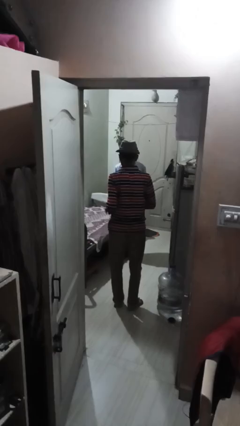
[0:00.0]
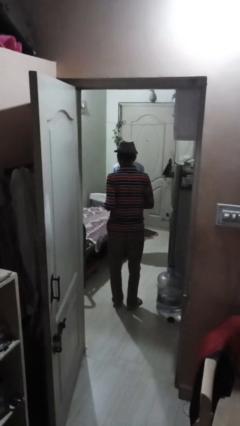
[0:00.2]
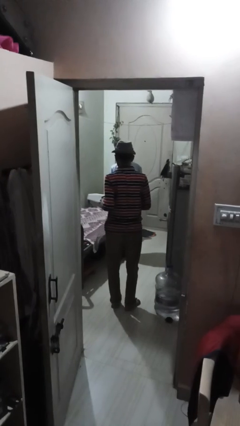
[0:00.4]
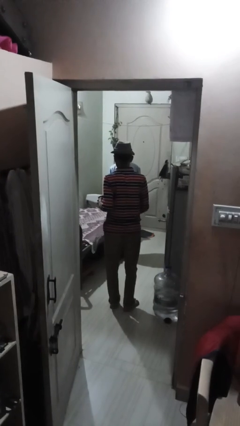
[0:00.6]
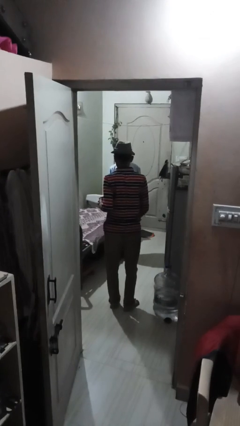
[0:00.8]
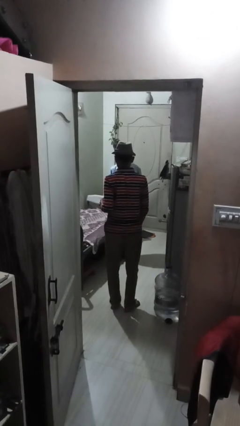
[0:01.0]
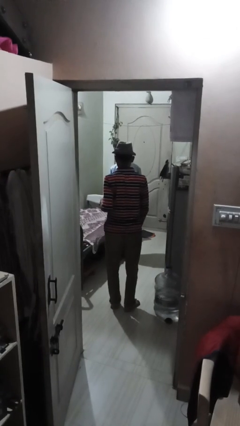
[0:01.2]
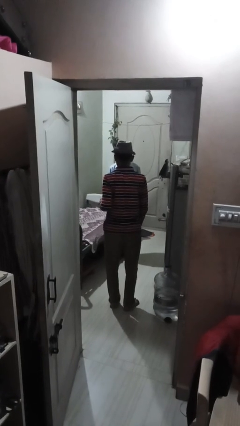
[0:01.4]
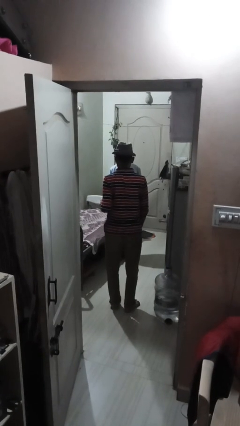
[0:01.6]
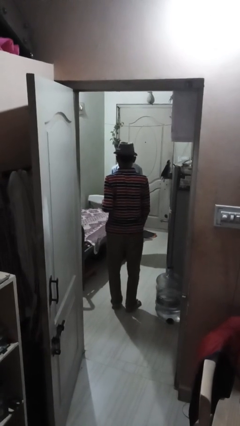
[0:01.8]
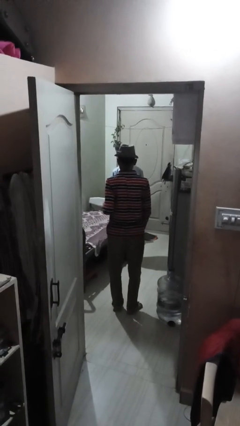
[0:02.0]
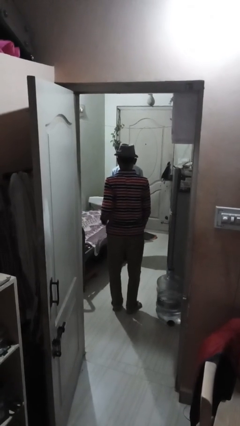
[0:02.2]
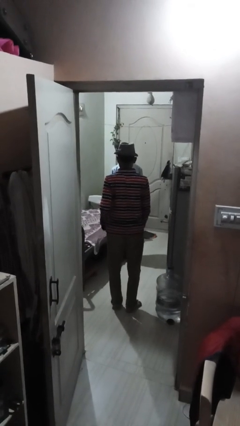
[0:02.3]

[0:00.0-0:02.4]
person throws object to person

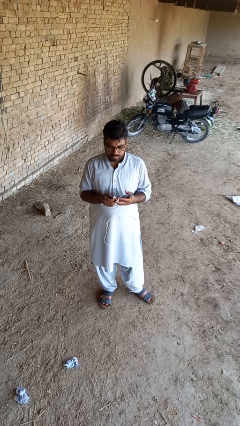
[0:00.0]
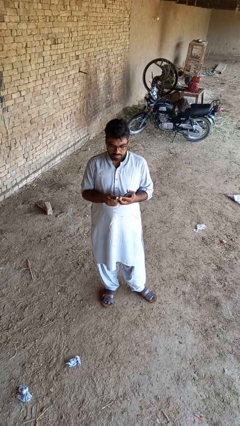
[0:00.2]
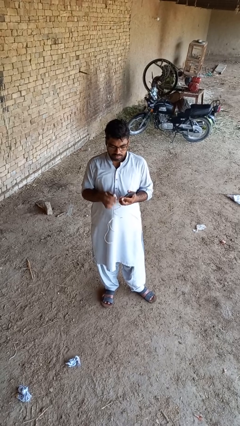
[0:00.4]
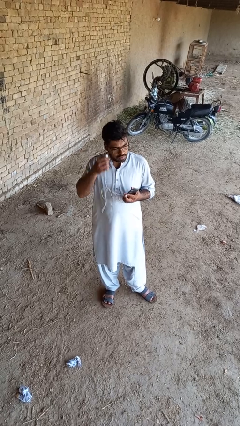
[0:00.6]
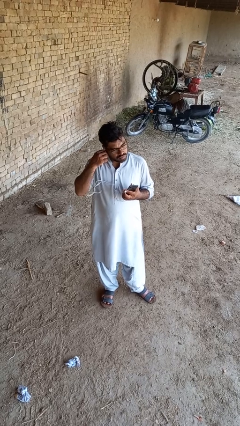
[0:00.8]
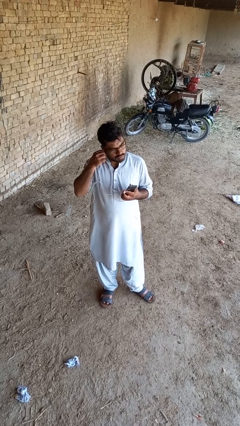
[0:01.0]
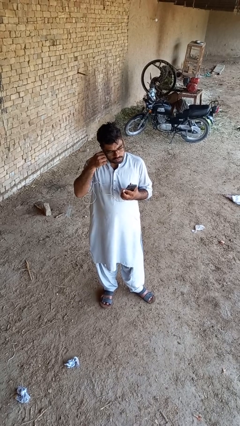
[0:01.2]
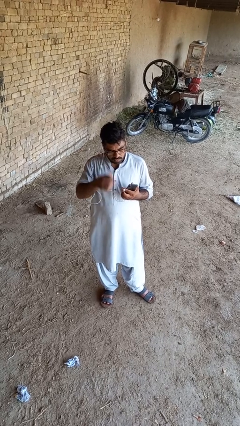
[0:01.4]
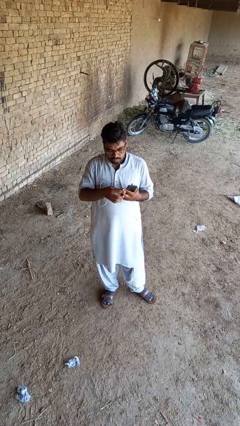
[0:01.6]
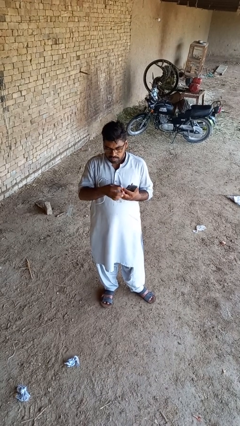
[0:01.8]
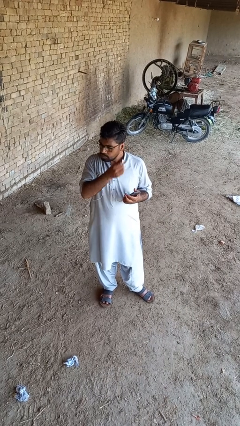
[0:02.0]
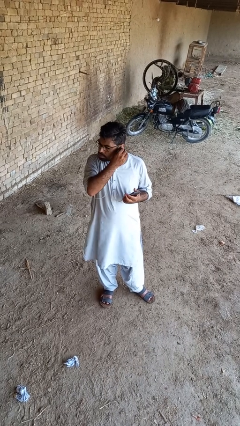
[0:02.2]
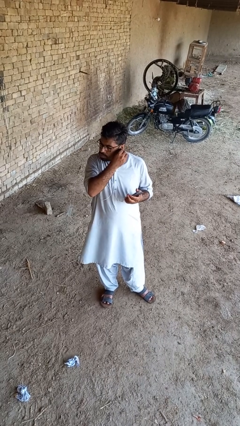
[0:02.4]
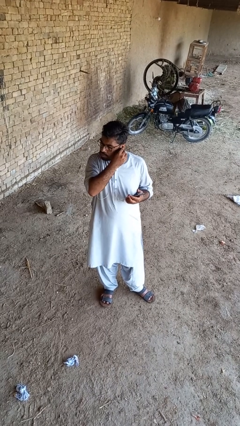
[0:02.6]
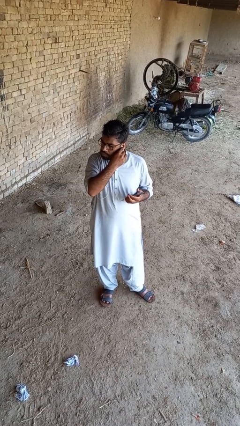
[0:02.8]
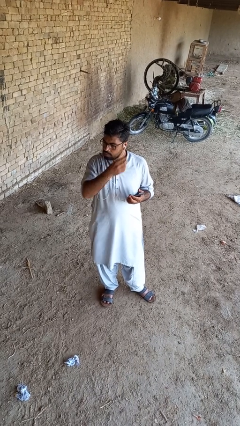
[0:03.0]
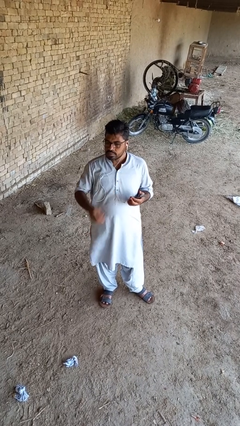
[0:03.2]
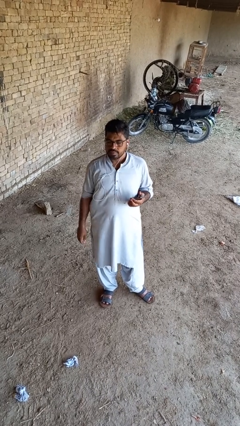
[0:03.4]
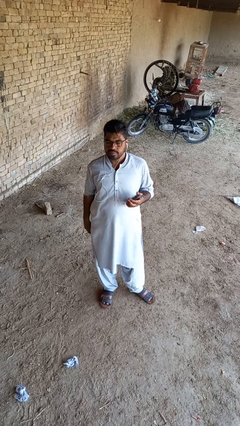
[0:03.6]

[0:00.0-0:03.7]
person puts on headphones

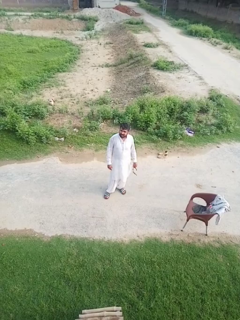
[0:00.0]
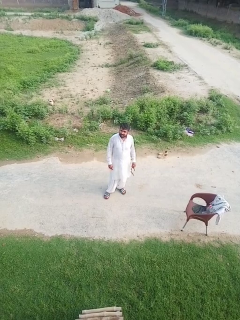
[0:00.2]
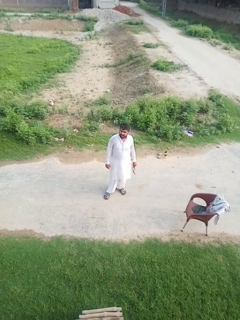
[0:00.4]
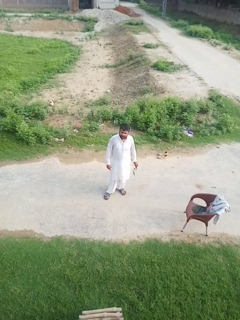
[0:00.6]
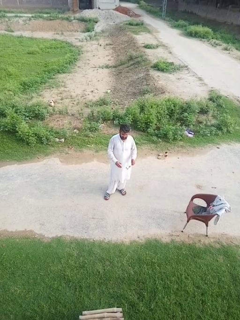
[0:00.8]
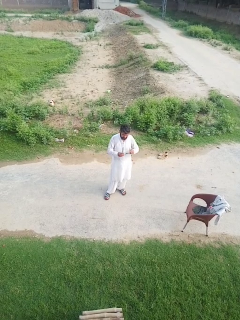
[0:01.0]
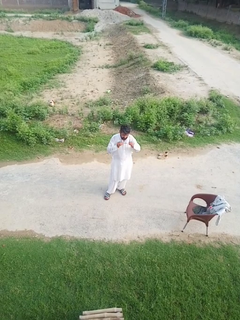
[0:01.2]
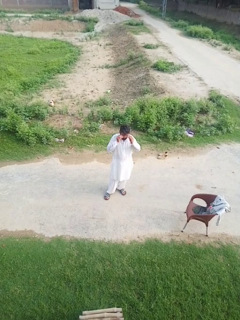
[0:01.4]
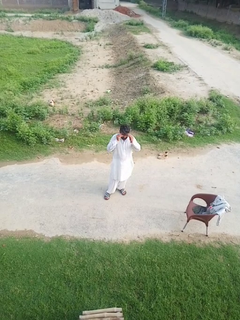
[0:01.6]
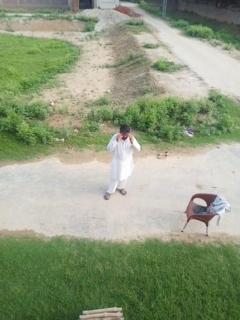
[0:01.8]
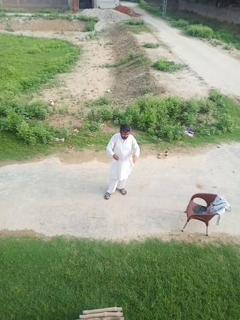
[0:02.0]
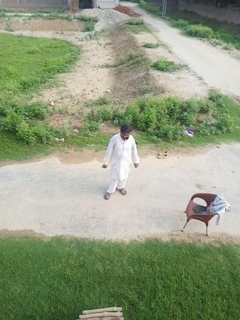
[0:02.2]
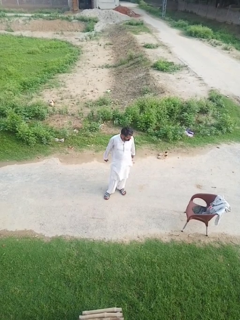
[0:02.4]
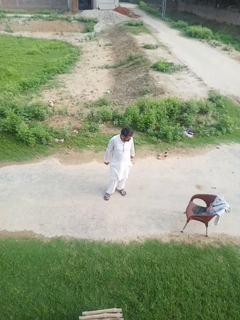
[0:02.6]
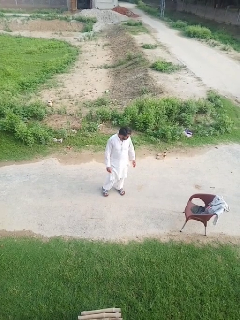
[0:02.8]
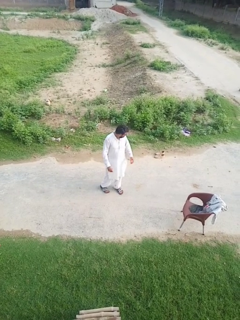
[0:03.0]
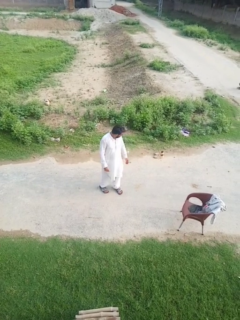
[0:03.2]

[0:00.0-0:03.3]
person puts on glasses

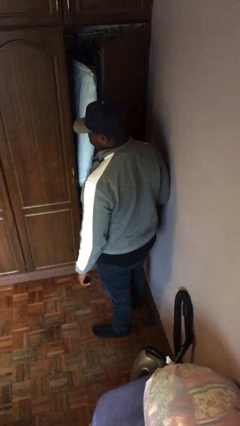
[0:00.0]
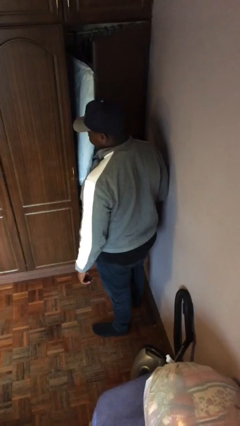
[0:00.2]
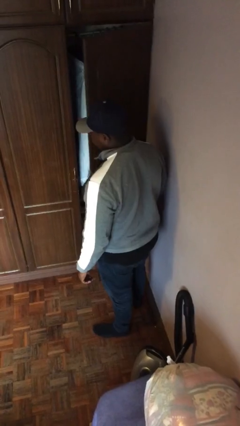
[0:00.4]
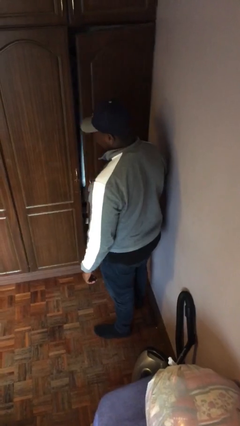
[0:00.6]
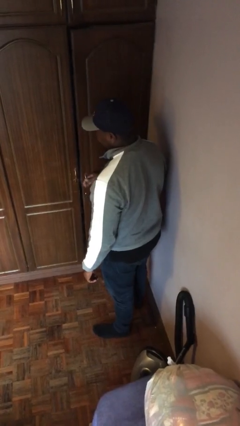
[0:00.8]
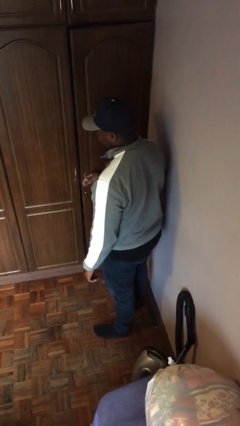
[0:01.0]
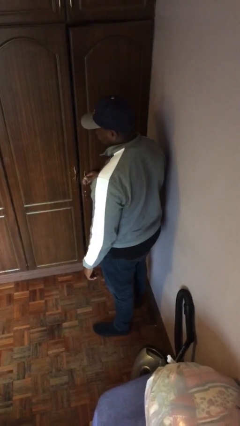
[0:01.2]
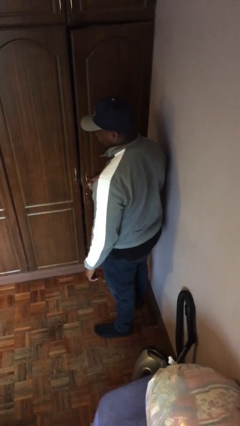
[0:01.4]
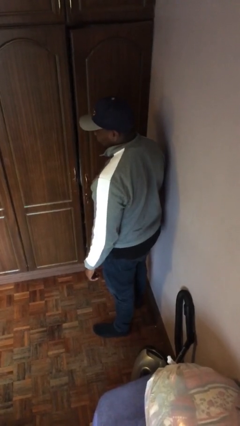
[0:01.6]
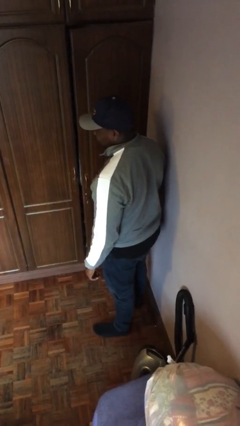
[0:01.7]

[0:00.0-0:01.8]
person closes closet door

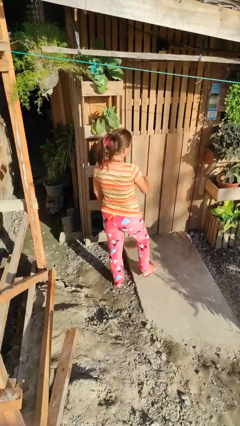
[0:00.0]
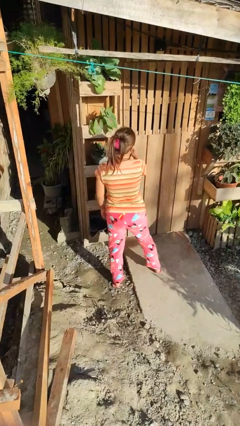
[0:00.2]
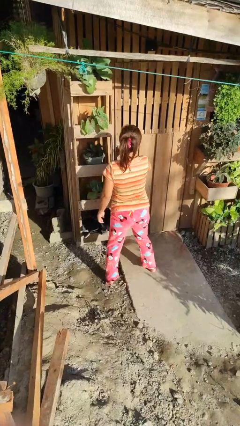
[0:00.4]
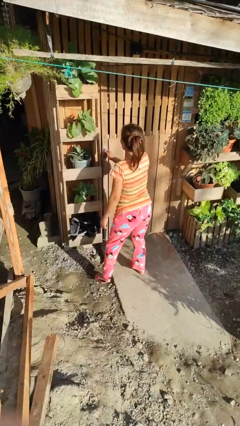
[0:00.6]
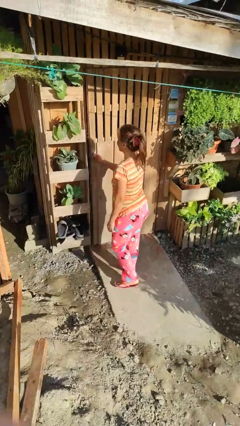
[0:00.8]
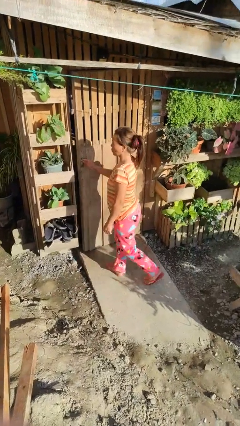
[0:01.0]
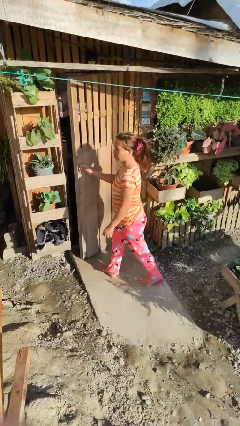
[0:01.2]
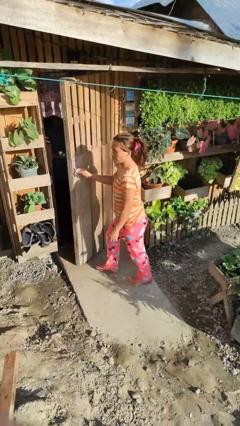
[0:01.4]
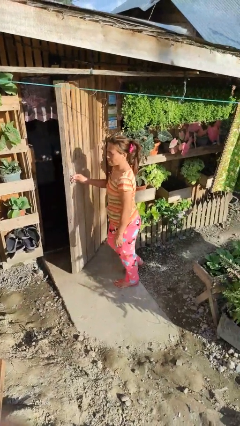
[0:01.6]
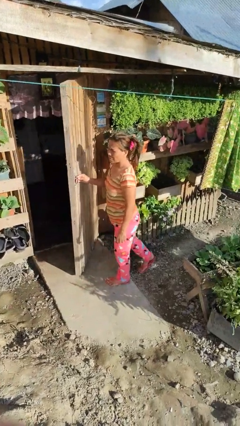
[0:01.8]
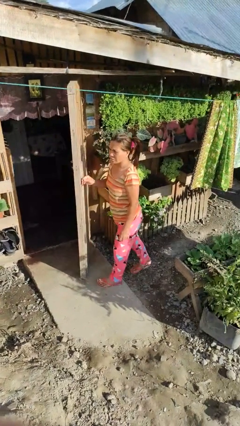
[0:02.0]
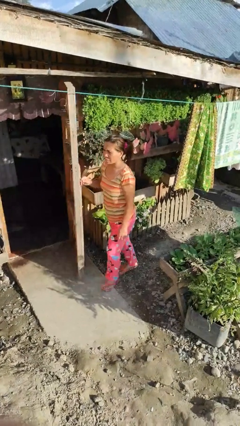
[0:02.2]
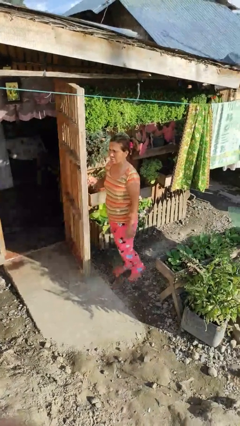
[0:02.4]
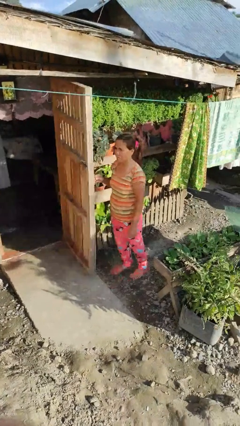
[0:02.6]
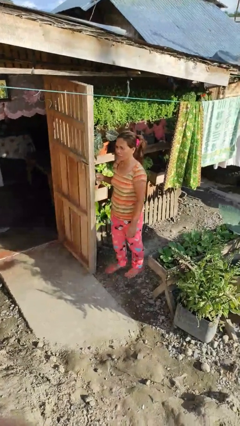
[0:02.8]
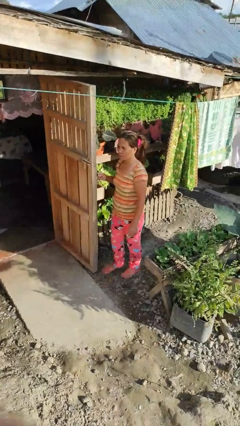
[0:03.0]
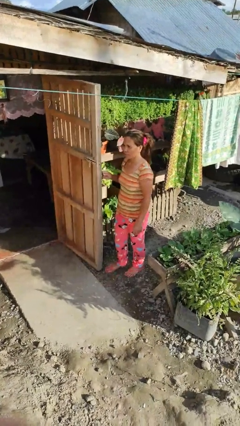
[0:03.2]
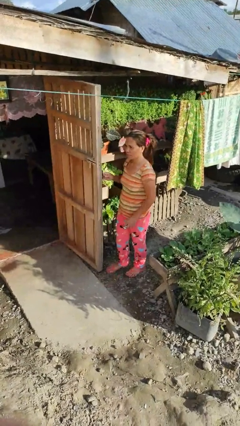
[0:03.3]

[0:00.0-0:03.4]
person opens facility door

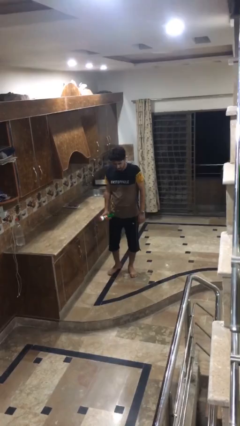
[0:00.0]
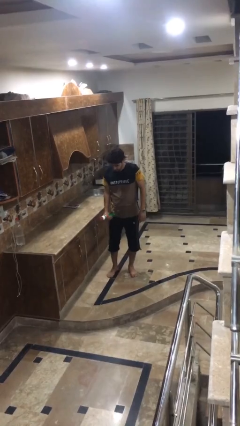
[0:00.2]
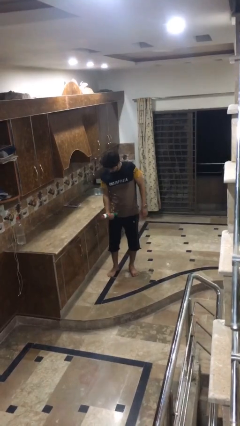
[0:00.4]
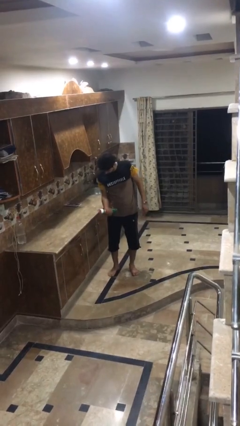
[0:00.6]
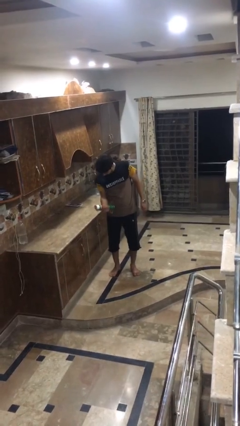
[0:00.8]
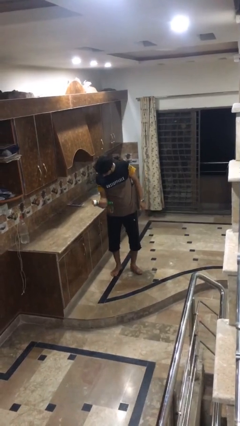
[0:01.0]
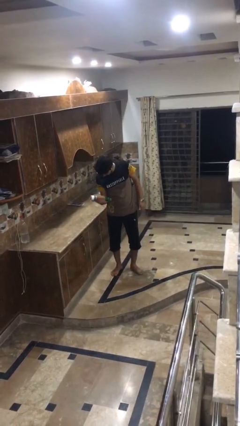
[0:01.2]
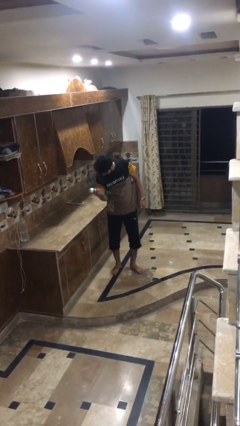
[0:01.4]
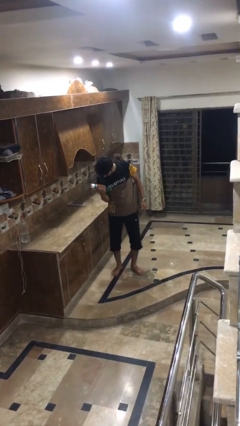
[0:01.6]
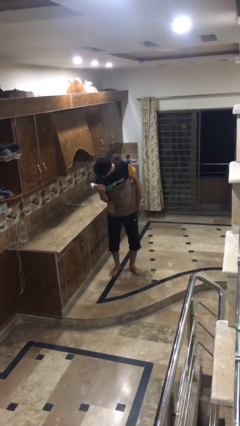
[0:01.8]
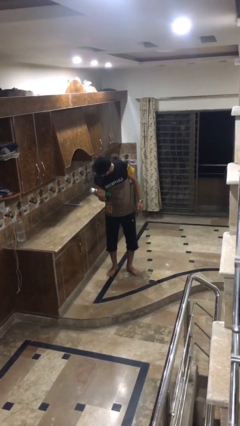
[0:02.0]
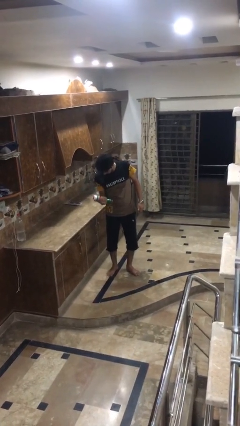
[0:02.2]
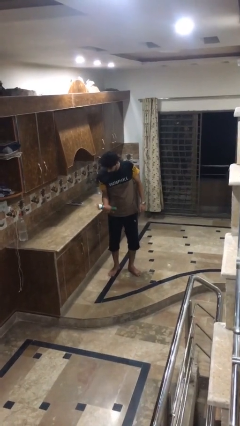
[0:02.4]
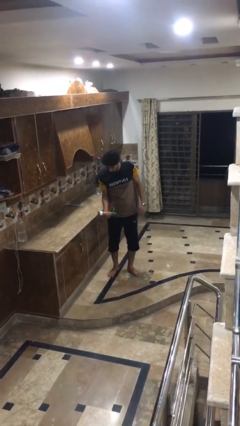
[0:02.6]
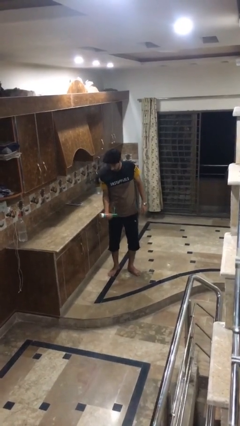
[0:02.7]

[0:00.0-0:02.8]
person lifts dumbbells

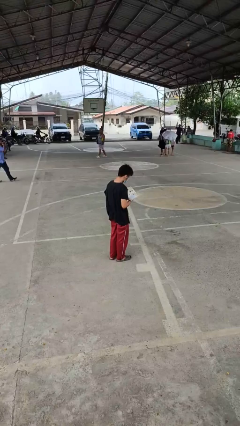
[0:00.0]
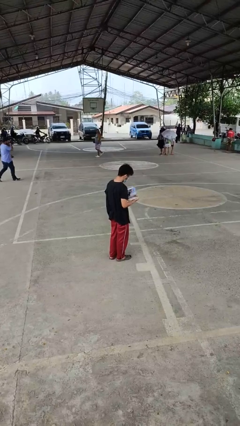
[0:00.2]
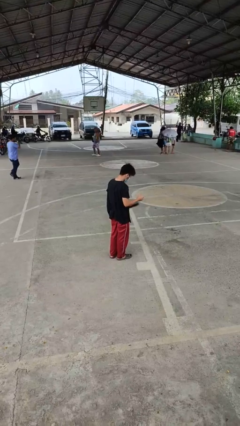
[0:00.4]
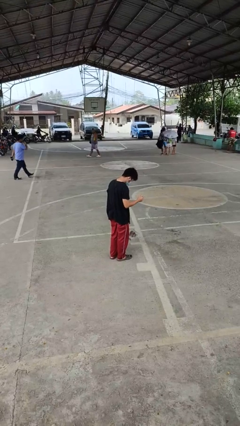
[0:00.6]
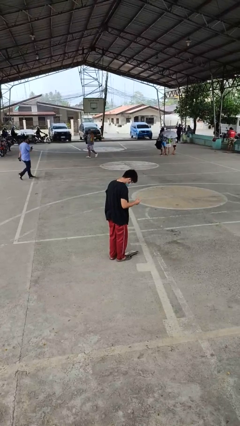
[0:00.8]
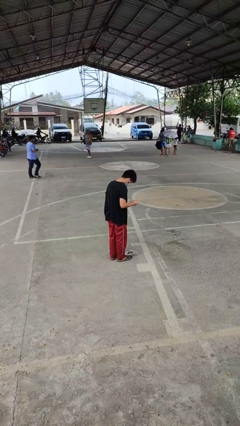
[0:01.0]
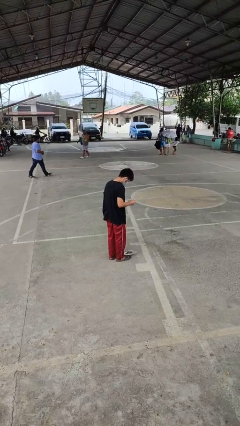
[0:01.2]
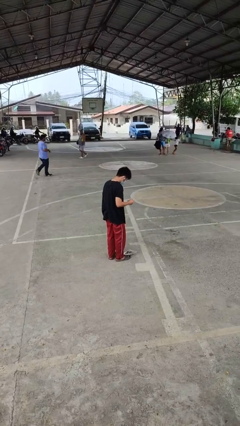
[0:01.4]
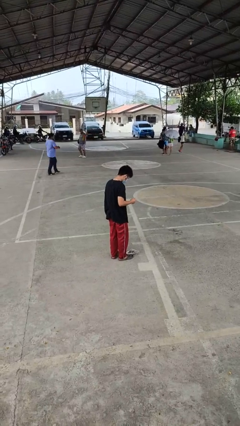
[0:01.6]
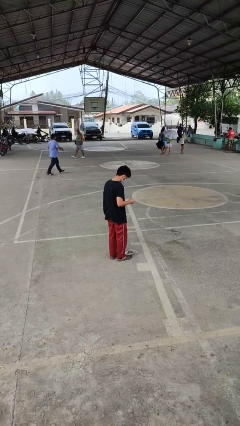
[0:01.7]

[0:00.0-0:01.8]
person drops object
